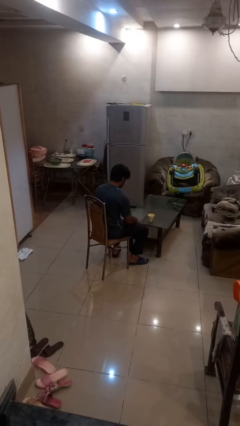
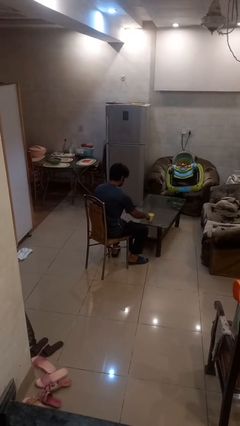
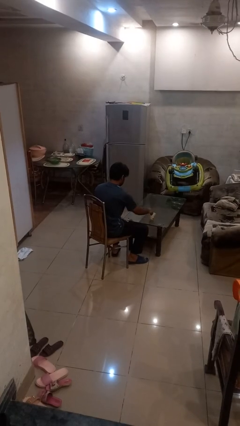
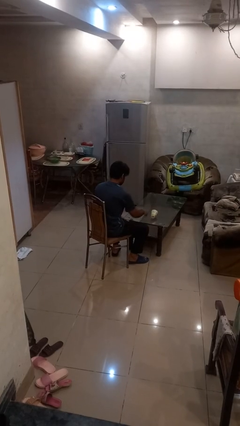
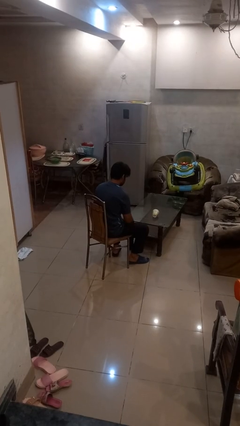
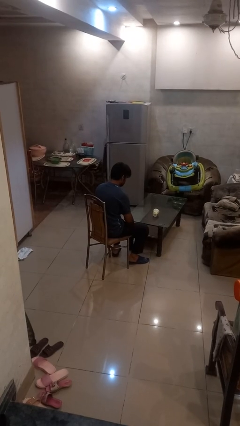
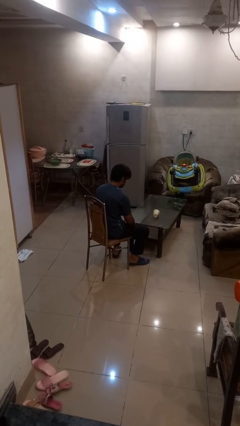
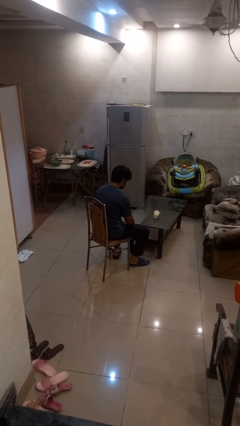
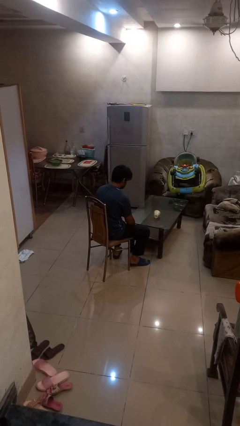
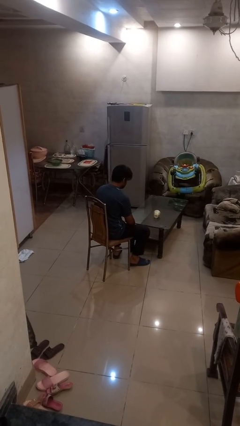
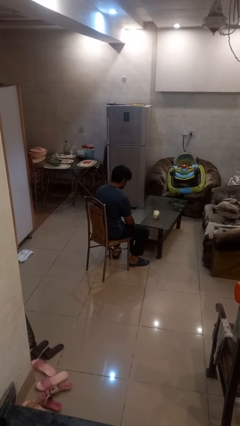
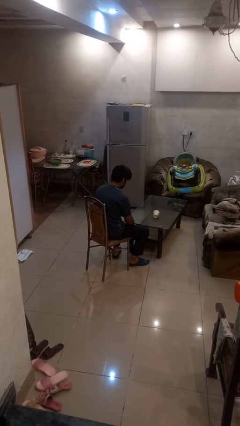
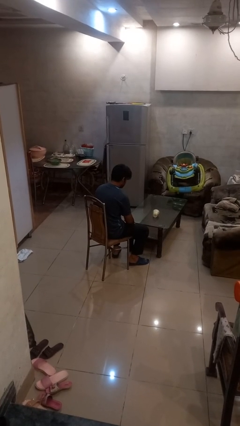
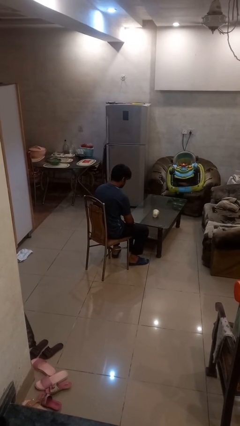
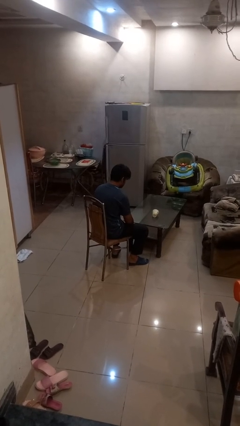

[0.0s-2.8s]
person knocks over glass

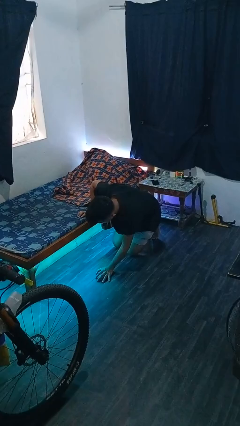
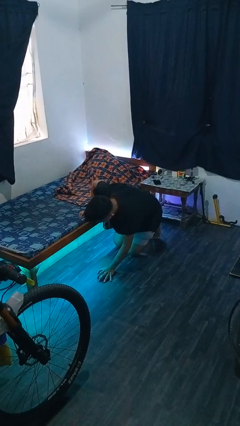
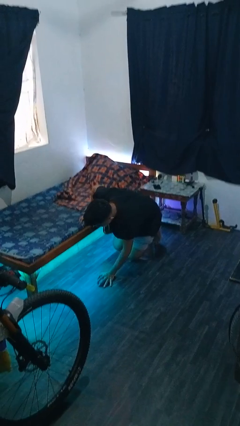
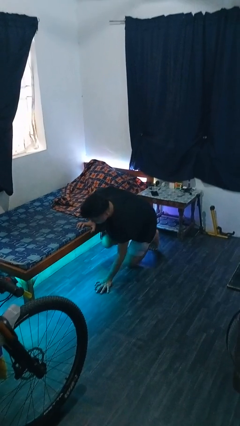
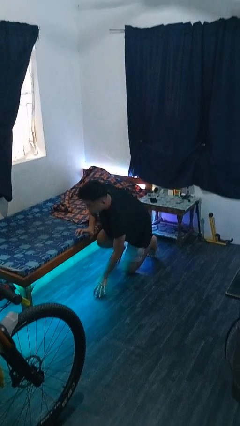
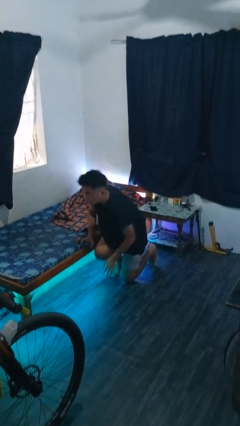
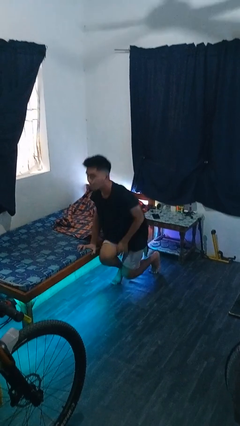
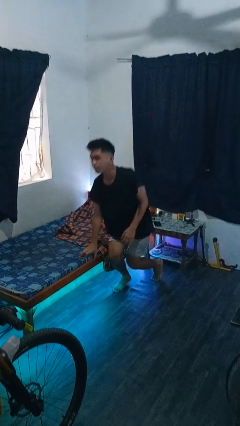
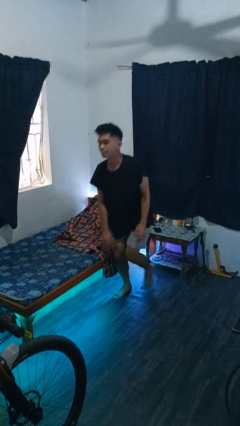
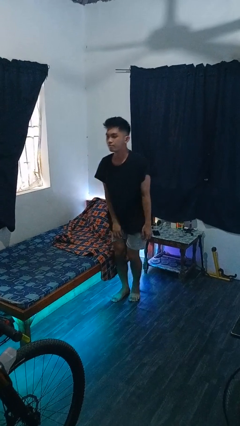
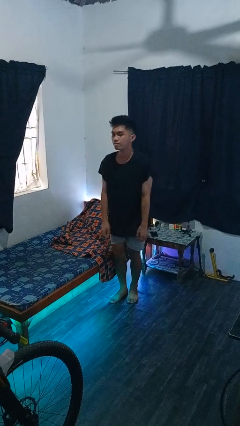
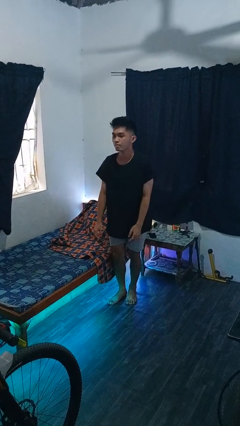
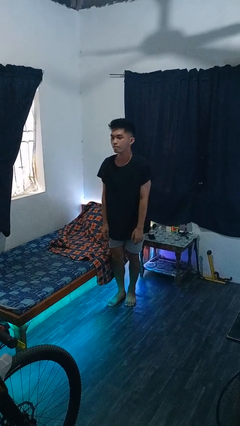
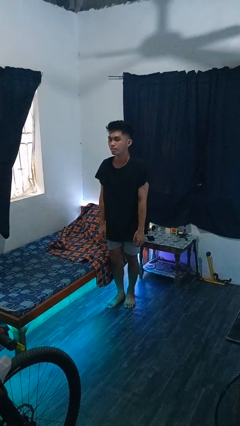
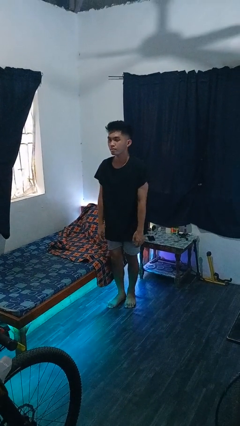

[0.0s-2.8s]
person stands up from floor

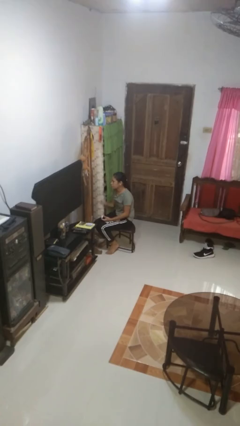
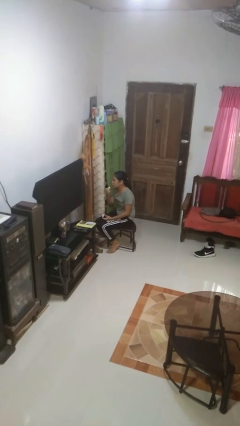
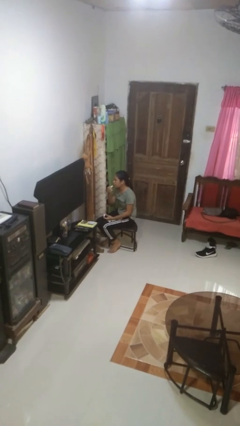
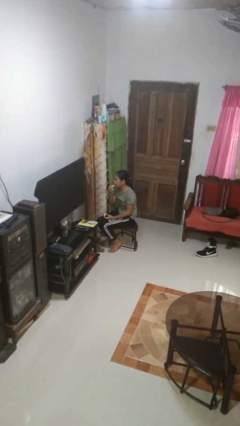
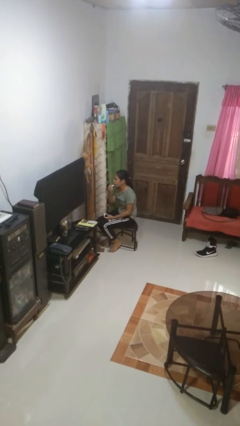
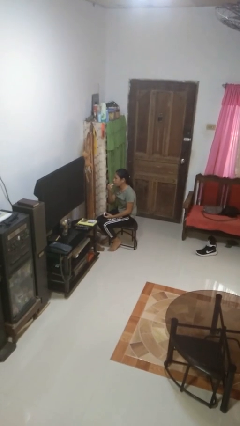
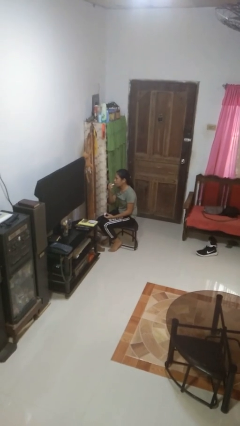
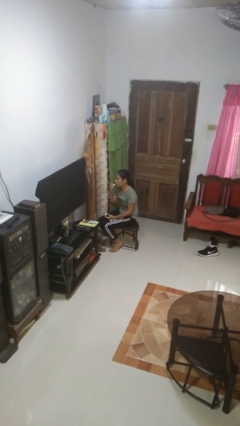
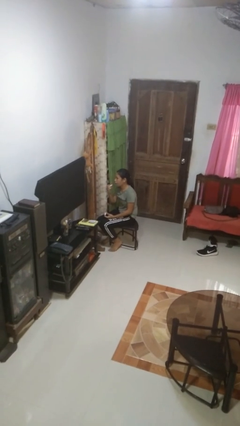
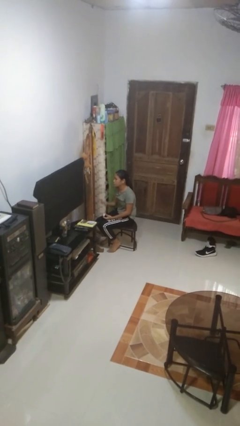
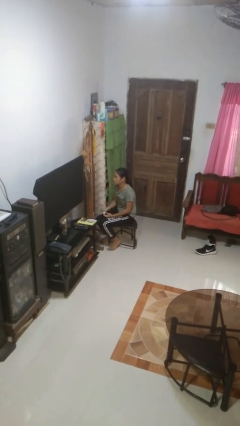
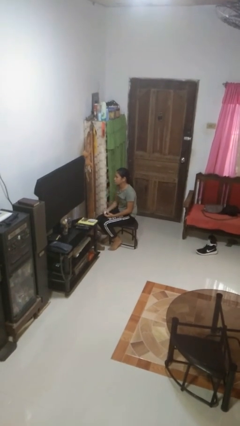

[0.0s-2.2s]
person applies lip makeup

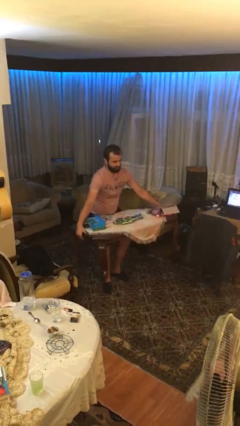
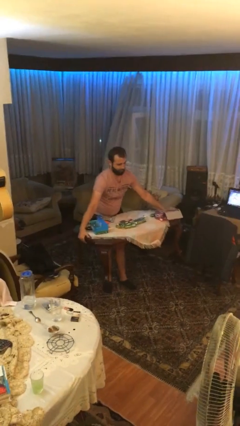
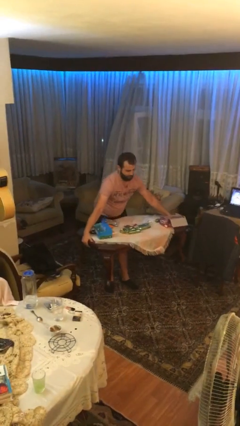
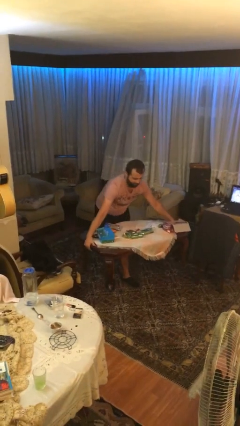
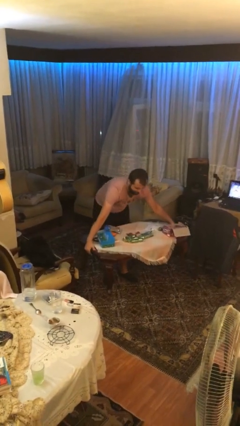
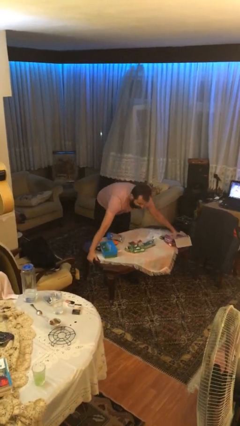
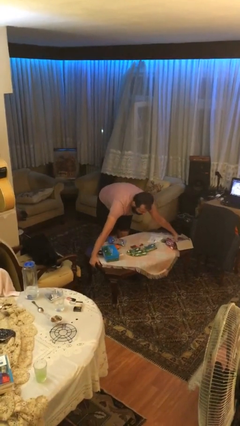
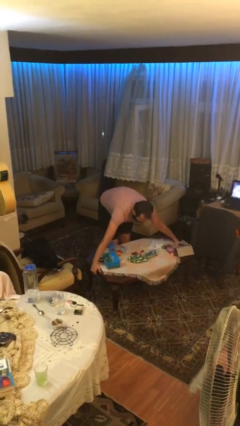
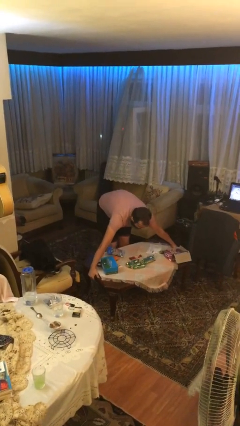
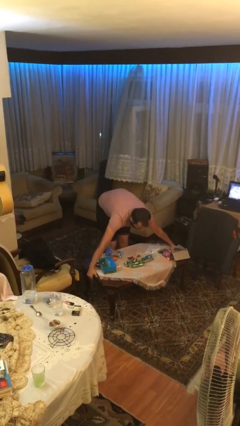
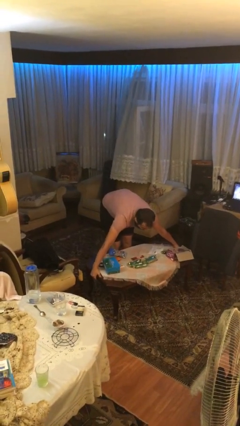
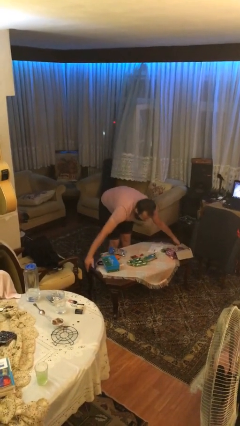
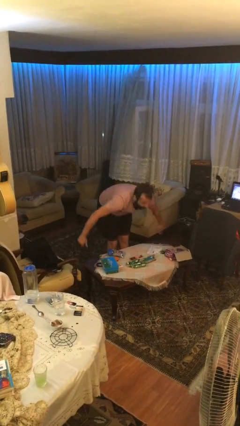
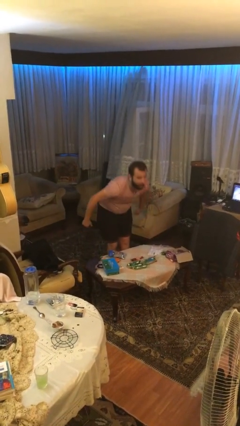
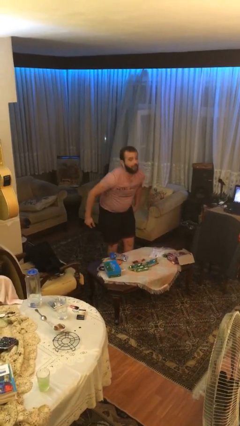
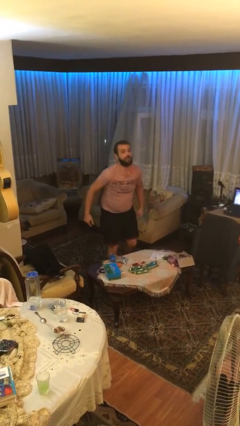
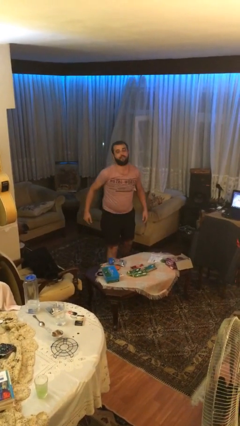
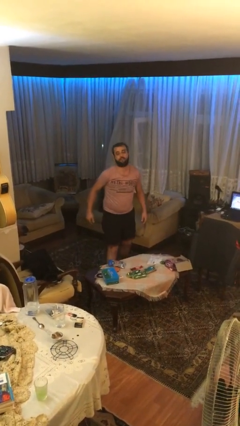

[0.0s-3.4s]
person puts down object on floor

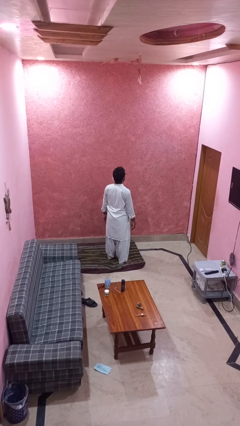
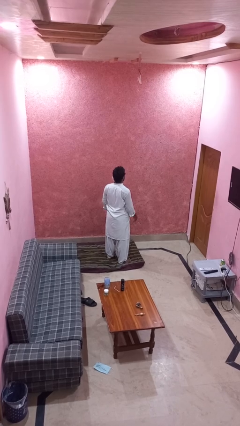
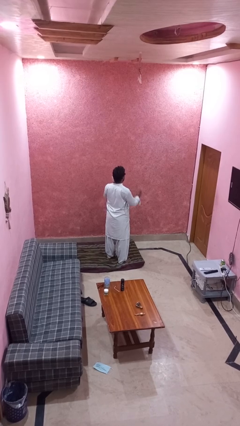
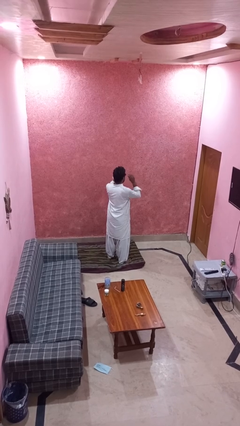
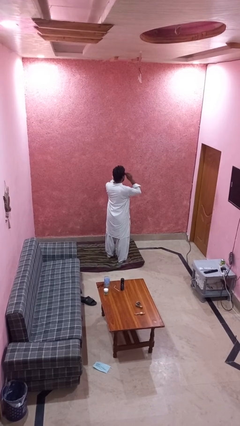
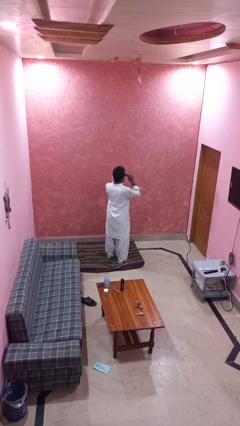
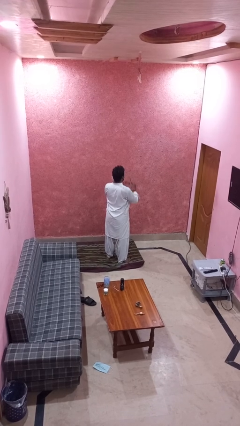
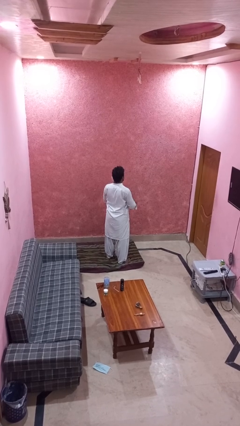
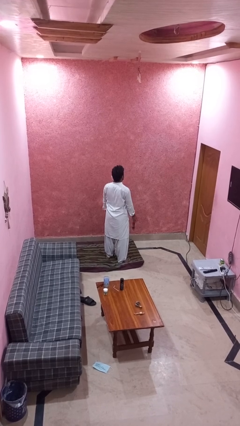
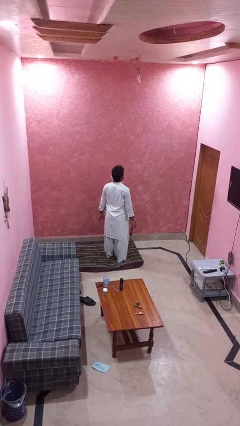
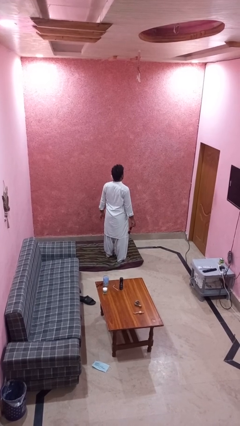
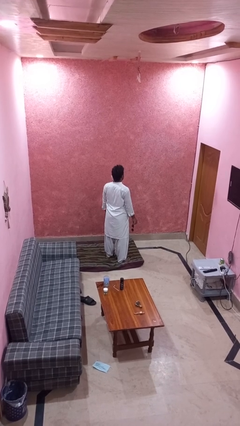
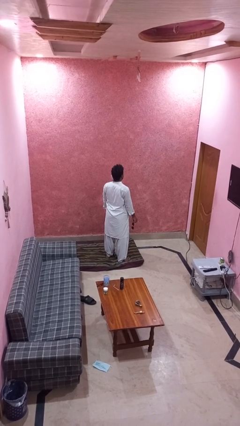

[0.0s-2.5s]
person takes off sunglasses

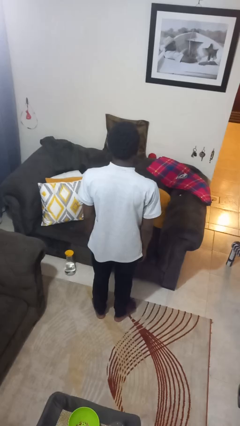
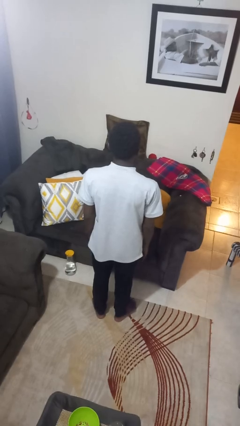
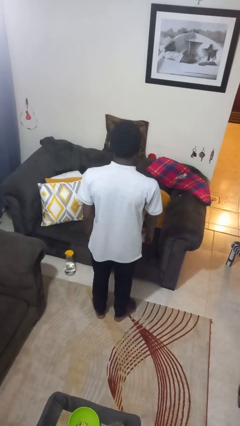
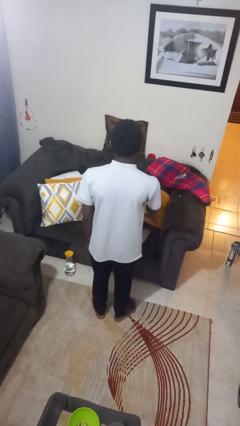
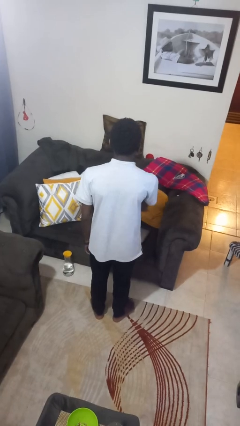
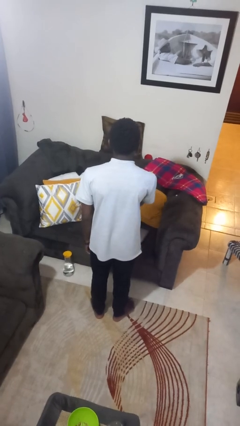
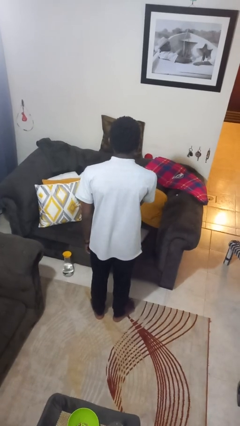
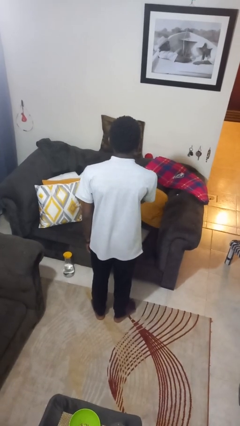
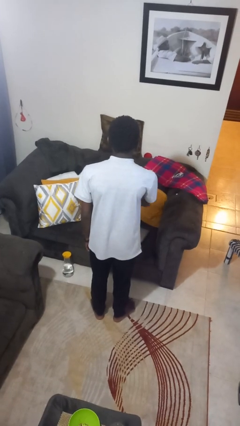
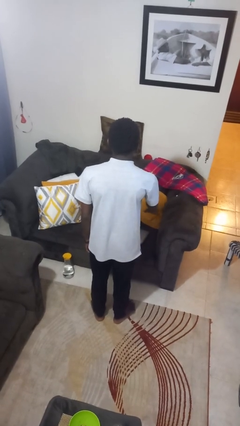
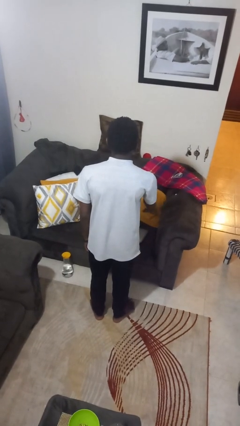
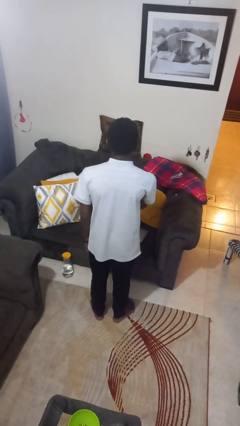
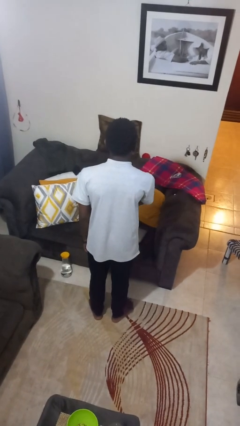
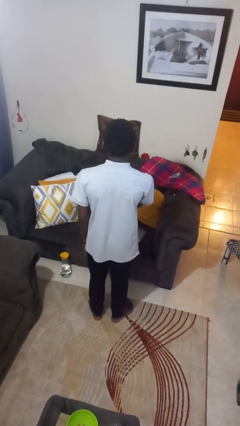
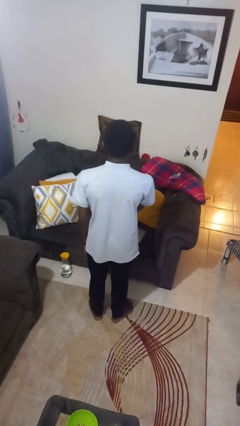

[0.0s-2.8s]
person waves hand over object

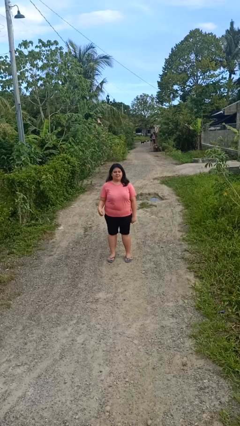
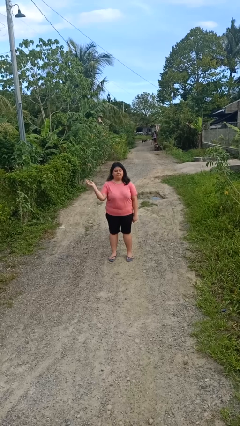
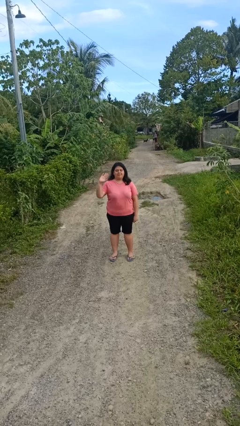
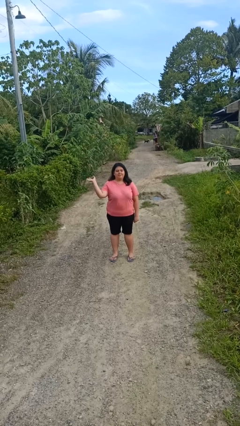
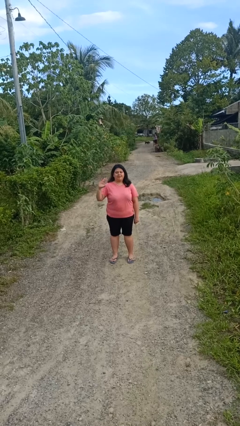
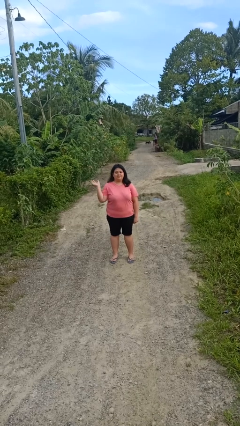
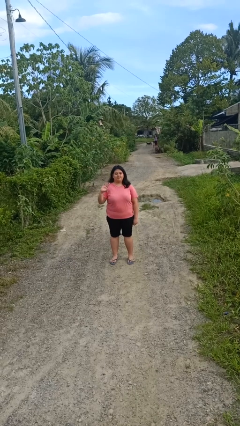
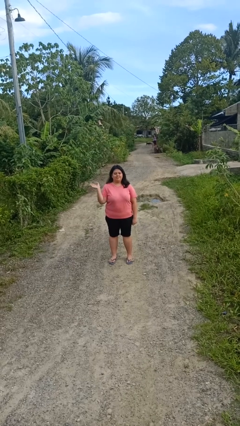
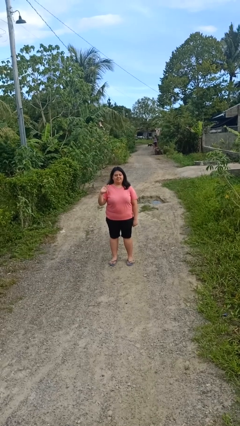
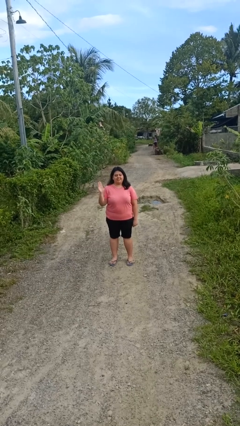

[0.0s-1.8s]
person waves at person
